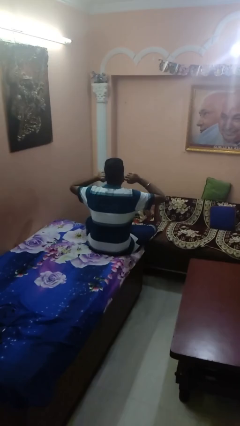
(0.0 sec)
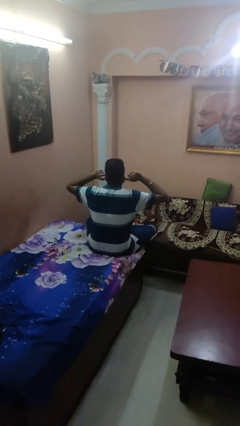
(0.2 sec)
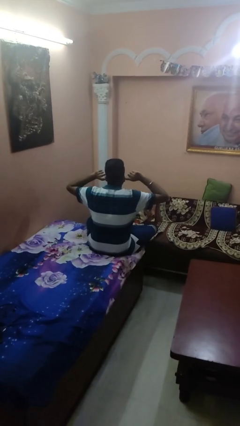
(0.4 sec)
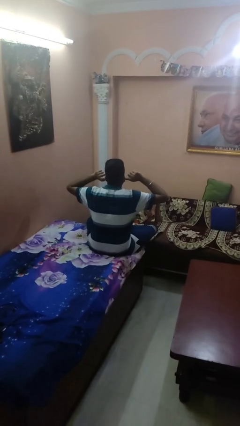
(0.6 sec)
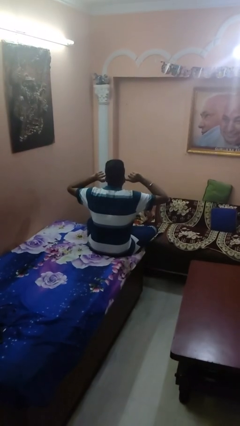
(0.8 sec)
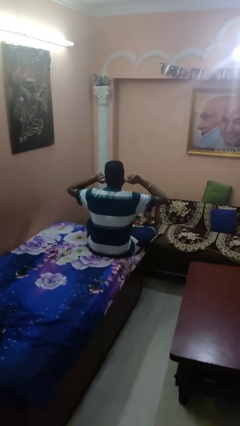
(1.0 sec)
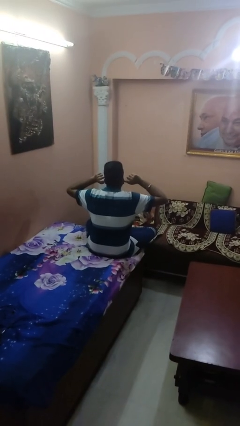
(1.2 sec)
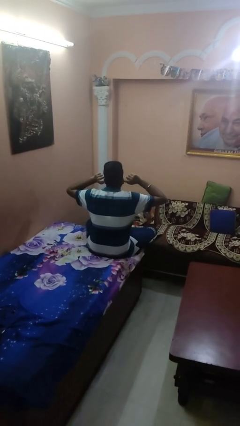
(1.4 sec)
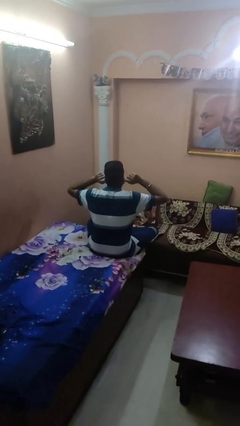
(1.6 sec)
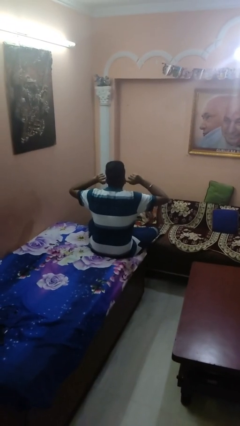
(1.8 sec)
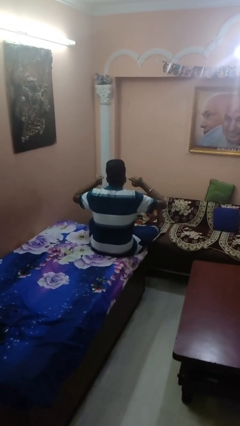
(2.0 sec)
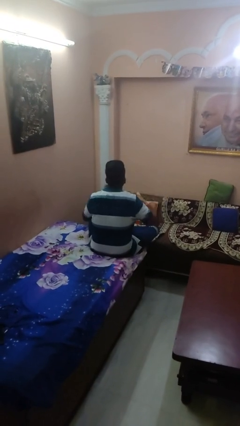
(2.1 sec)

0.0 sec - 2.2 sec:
person puts fingers in ear

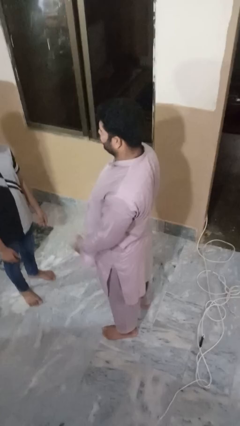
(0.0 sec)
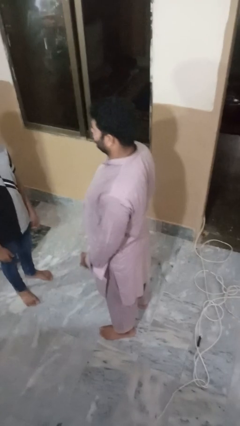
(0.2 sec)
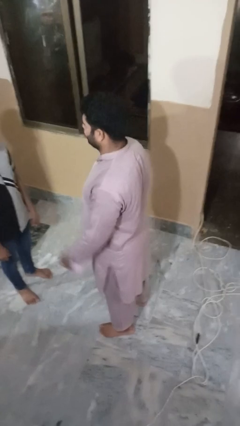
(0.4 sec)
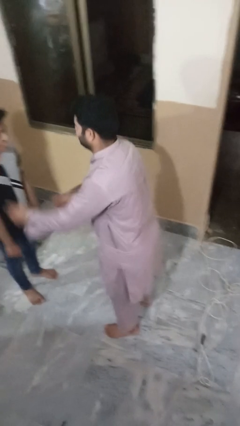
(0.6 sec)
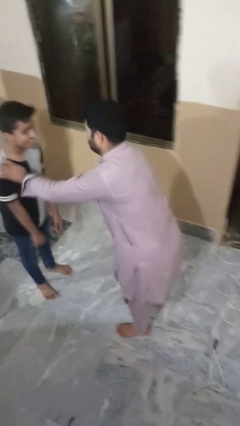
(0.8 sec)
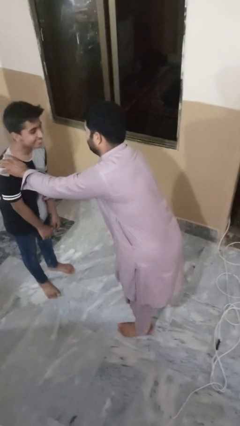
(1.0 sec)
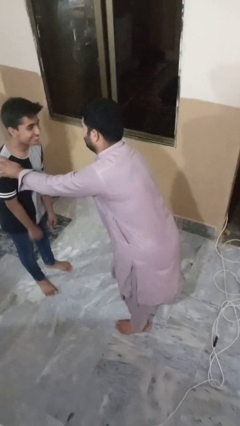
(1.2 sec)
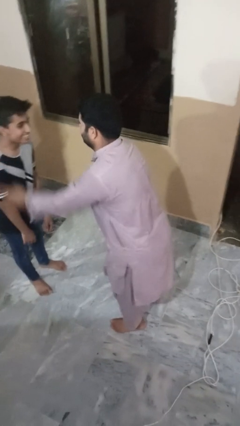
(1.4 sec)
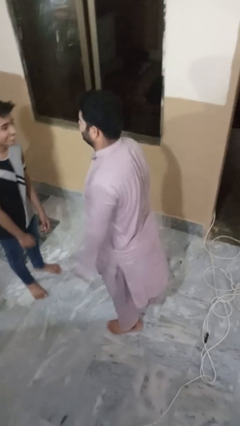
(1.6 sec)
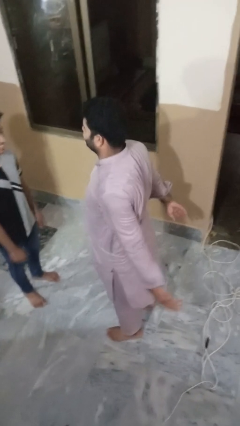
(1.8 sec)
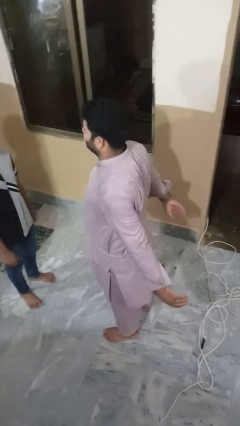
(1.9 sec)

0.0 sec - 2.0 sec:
person tickles person

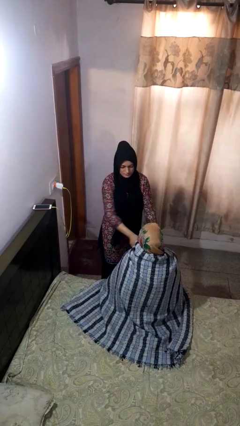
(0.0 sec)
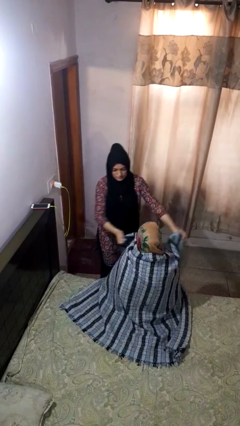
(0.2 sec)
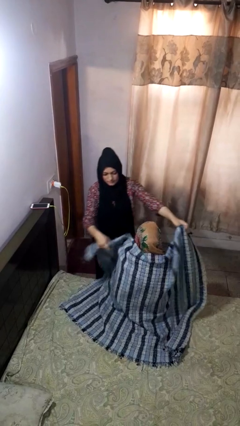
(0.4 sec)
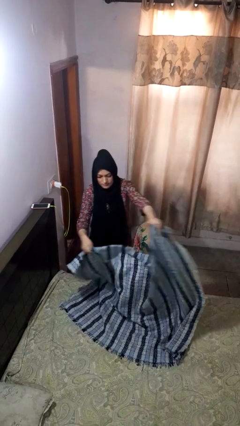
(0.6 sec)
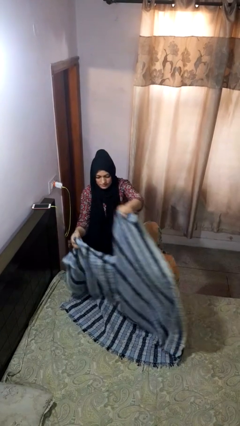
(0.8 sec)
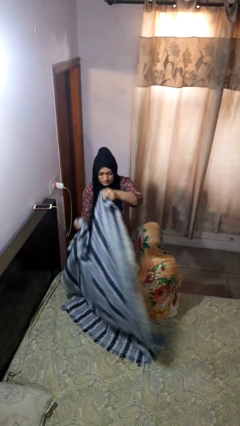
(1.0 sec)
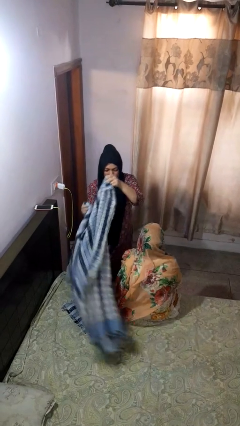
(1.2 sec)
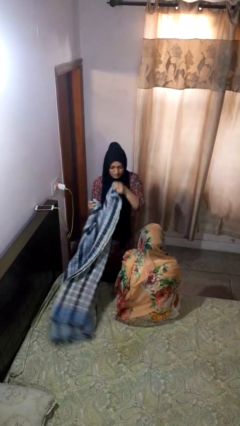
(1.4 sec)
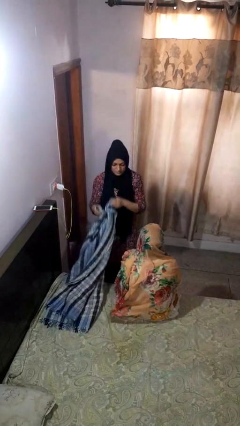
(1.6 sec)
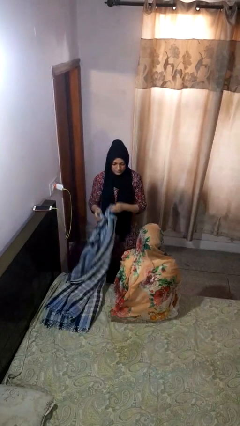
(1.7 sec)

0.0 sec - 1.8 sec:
person uncovers friend with blanket

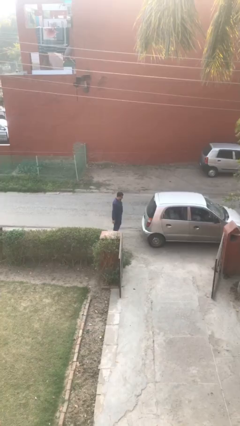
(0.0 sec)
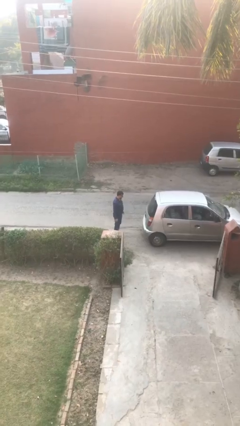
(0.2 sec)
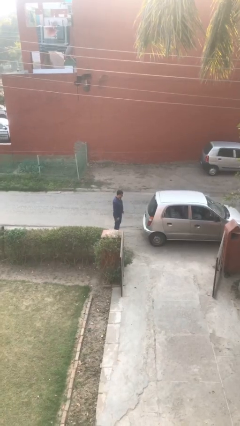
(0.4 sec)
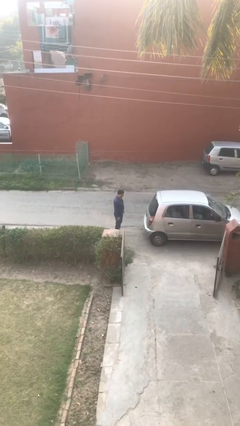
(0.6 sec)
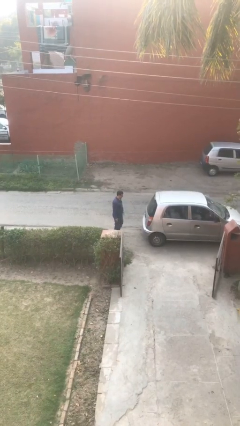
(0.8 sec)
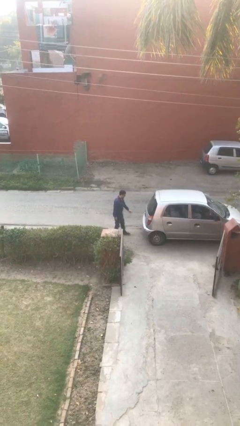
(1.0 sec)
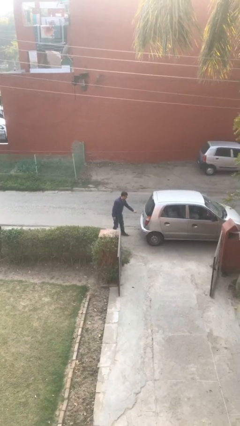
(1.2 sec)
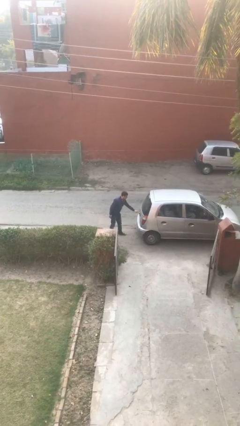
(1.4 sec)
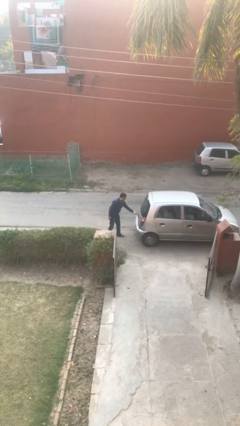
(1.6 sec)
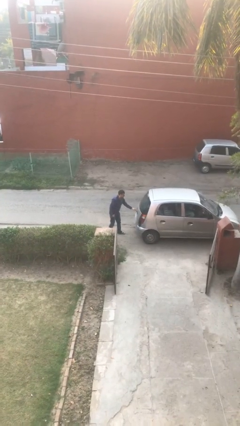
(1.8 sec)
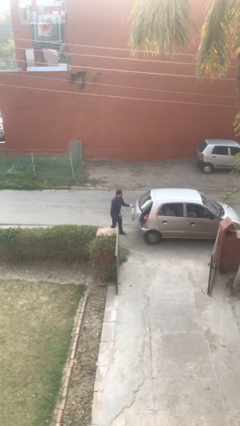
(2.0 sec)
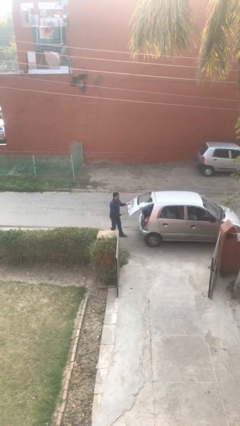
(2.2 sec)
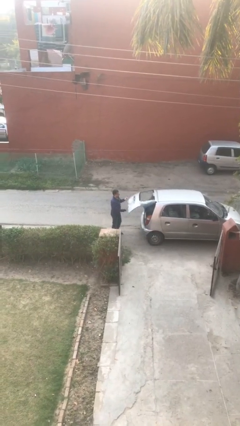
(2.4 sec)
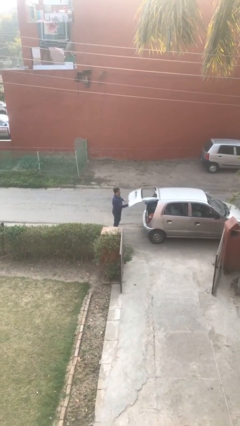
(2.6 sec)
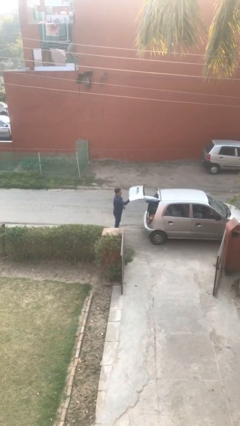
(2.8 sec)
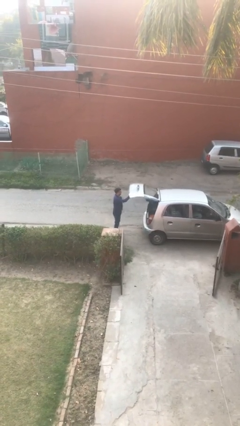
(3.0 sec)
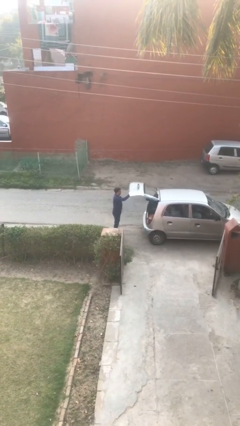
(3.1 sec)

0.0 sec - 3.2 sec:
person opens car trunk

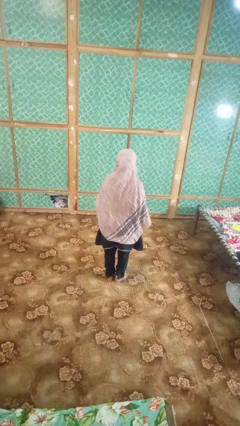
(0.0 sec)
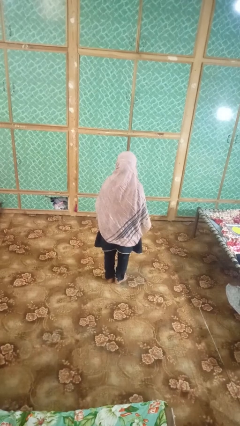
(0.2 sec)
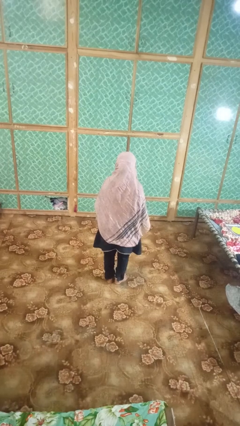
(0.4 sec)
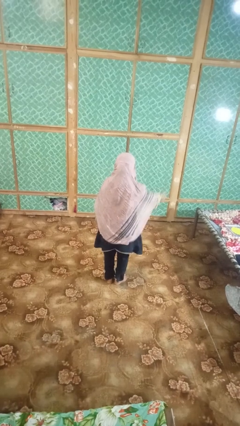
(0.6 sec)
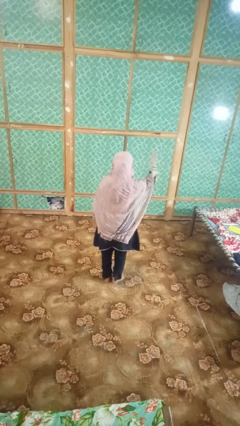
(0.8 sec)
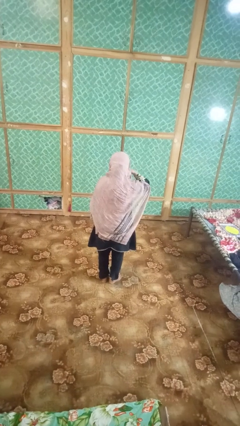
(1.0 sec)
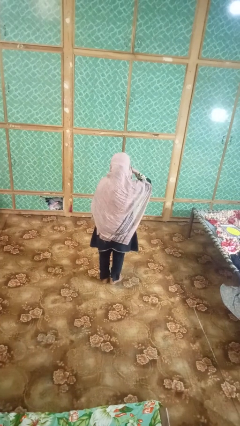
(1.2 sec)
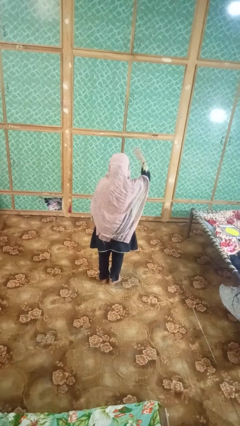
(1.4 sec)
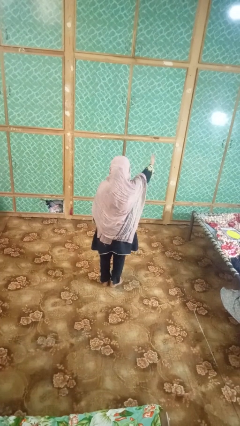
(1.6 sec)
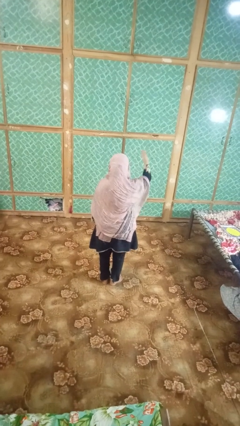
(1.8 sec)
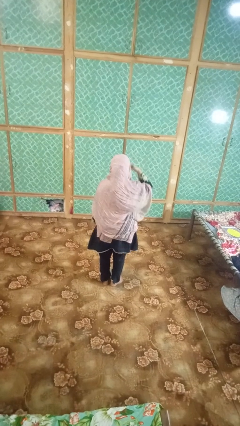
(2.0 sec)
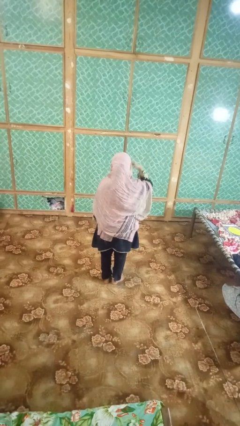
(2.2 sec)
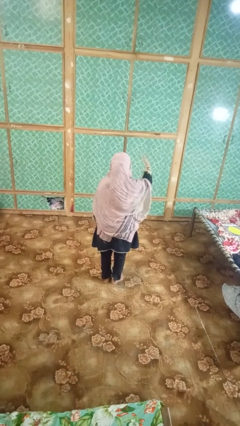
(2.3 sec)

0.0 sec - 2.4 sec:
person gestures blow kiss

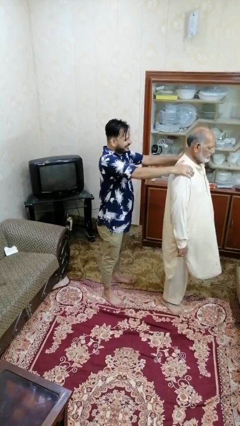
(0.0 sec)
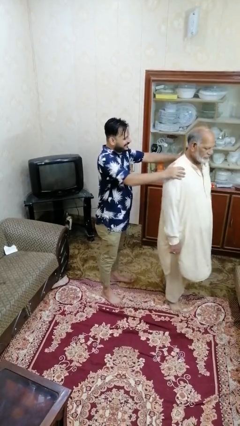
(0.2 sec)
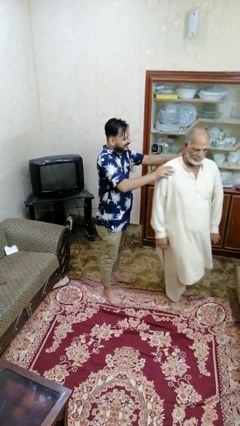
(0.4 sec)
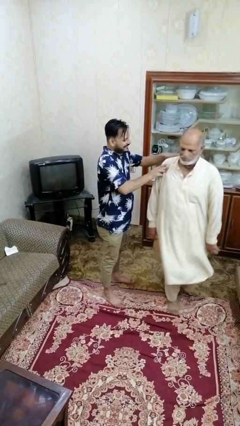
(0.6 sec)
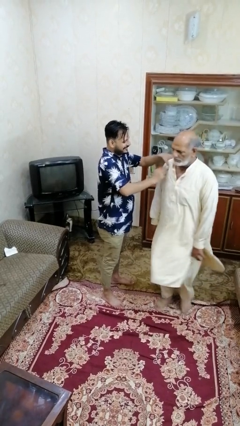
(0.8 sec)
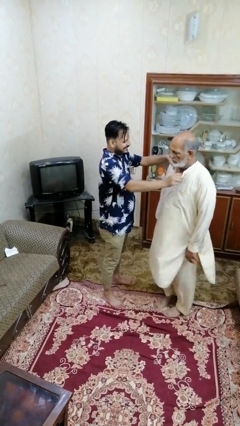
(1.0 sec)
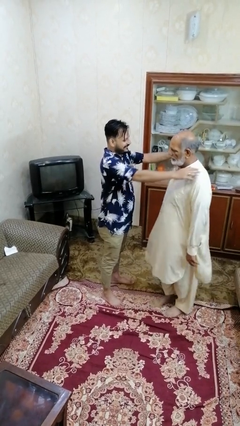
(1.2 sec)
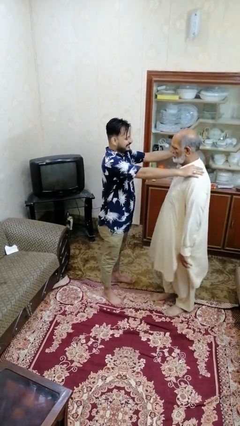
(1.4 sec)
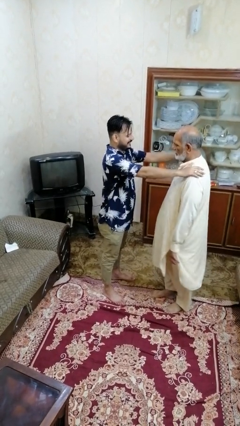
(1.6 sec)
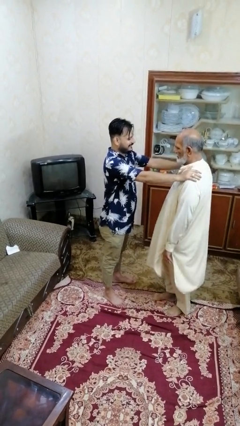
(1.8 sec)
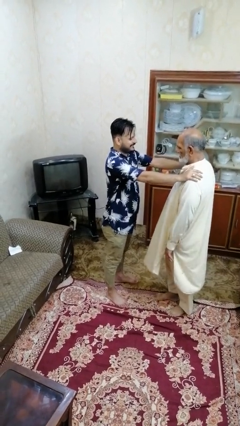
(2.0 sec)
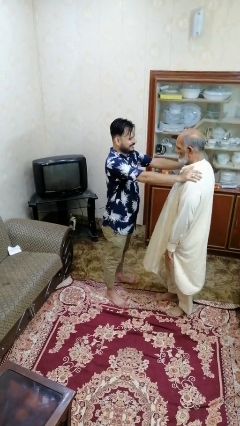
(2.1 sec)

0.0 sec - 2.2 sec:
person spins person around

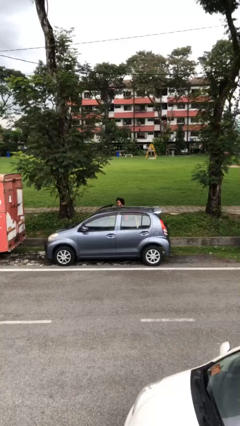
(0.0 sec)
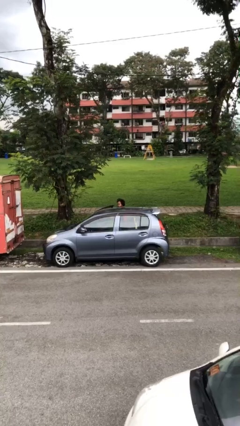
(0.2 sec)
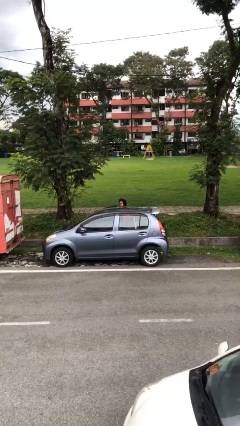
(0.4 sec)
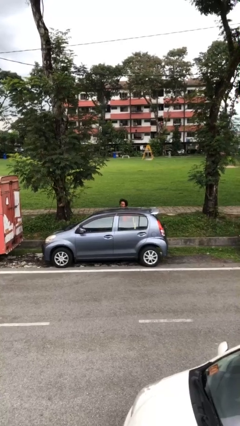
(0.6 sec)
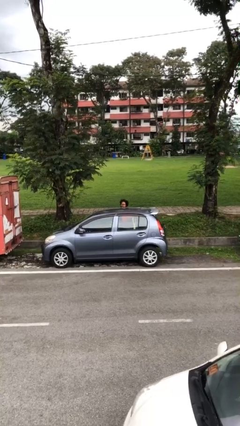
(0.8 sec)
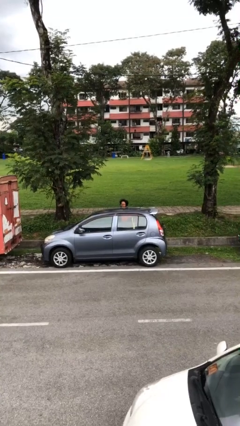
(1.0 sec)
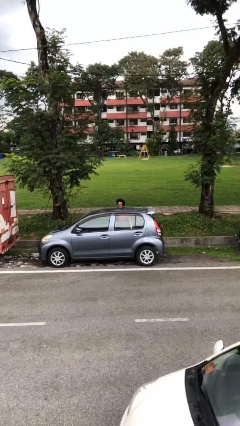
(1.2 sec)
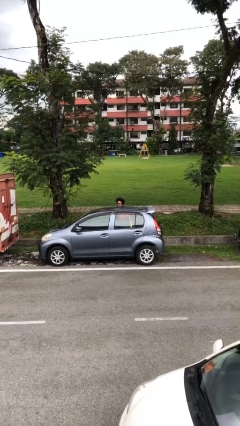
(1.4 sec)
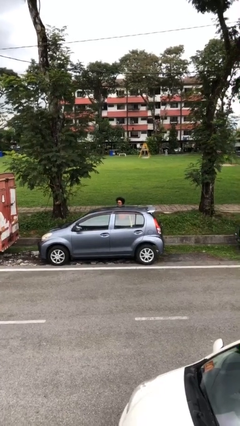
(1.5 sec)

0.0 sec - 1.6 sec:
person closes car door

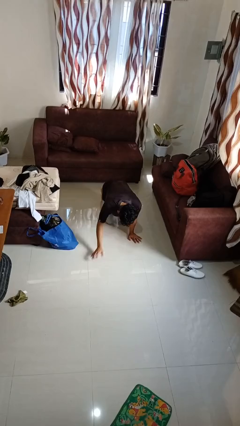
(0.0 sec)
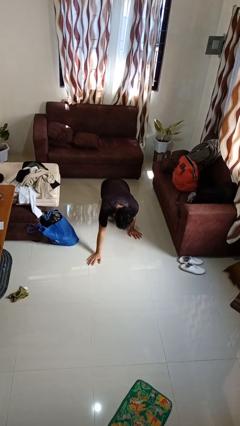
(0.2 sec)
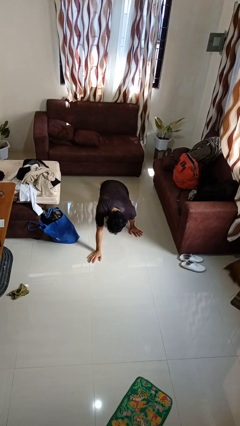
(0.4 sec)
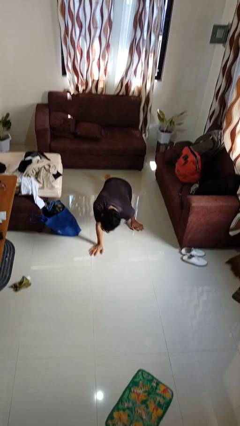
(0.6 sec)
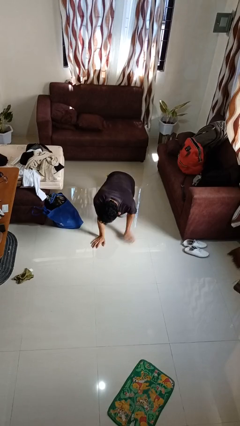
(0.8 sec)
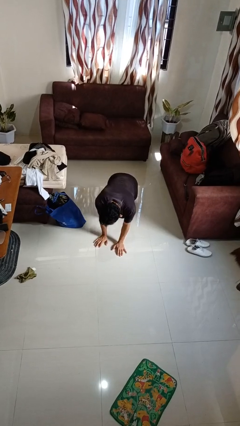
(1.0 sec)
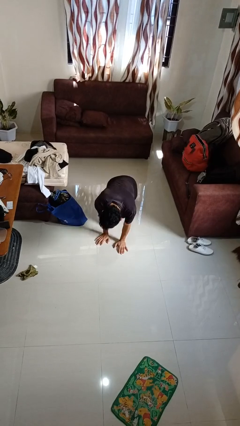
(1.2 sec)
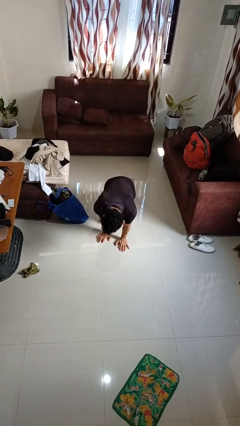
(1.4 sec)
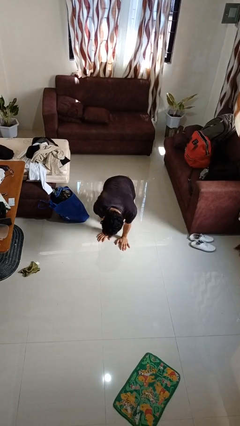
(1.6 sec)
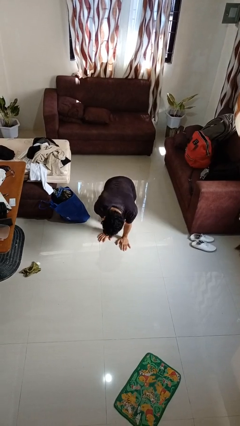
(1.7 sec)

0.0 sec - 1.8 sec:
person crawls
